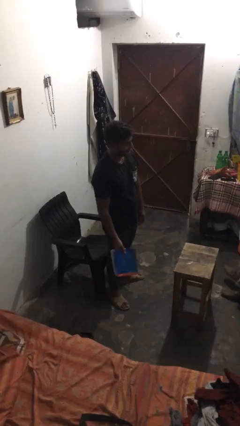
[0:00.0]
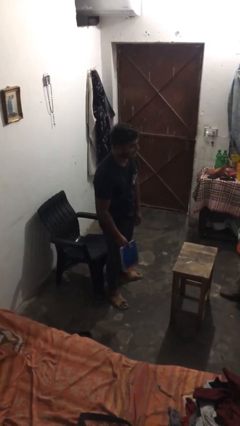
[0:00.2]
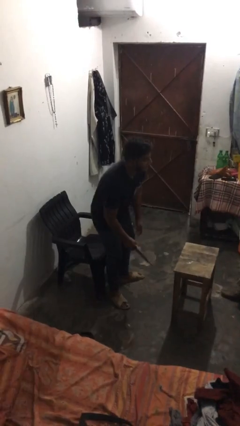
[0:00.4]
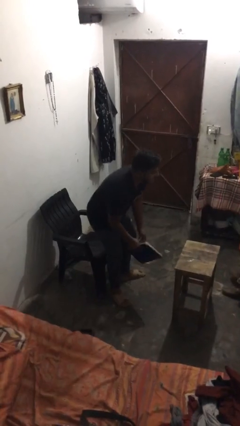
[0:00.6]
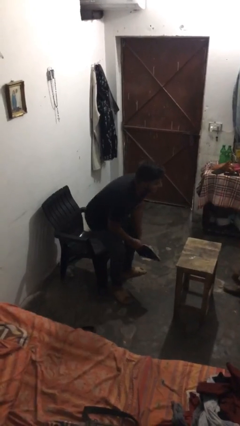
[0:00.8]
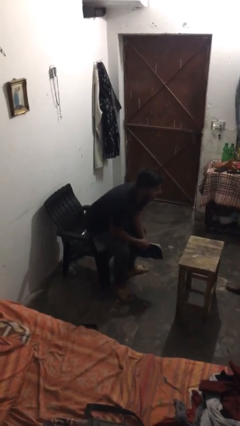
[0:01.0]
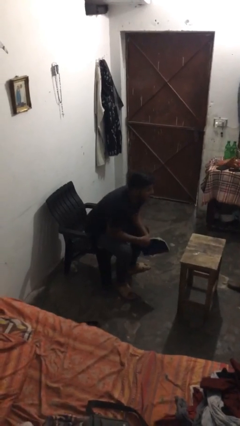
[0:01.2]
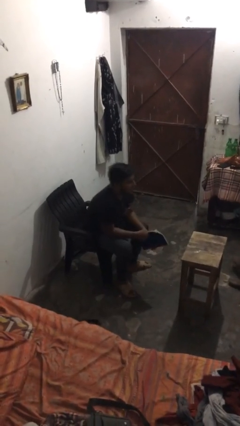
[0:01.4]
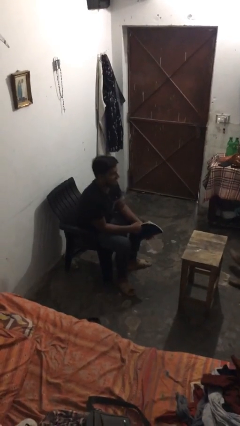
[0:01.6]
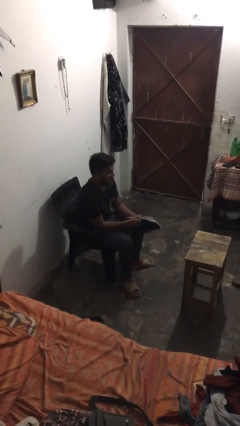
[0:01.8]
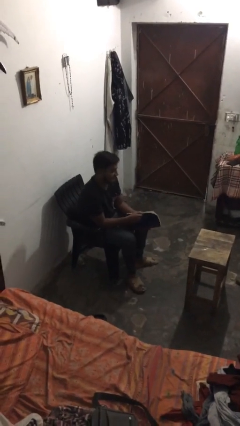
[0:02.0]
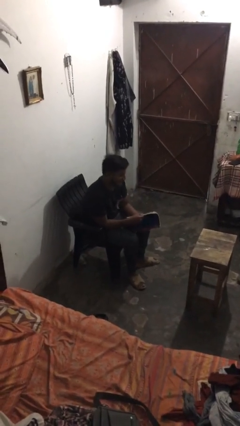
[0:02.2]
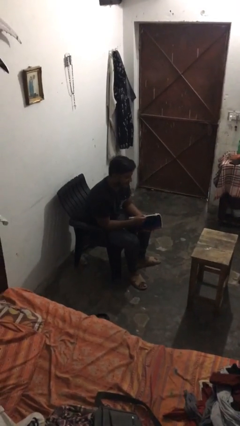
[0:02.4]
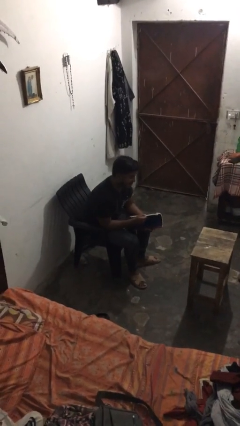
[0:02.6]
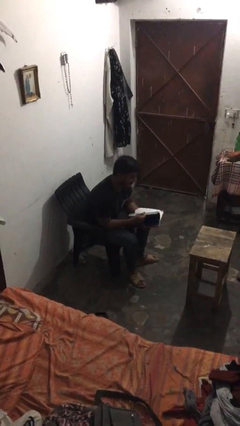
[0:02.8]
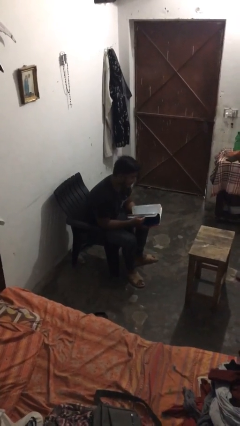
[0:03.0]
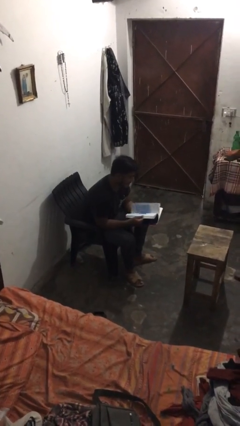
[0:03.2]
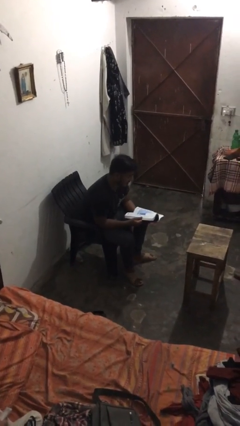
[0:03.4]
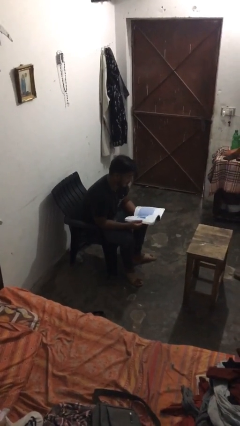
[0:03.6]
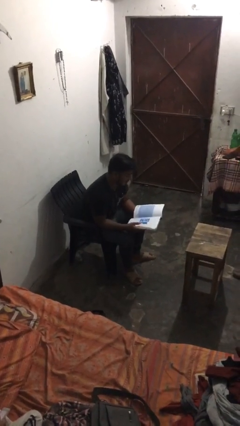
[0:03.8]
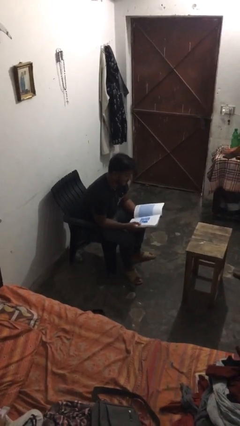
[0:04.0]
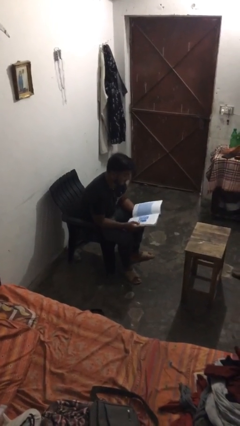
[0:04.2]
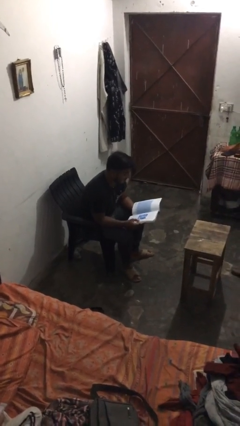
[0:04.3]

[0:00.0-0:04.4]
person sits down

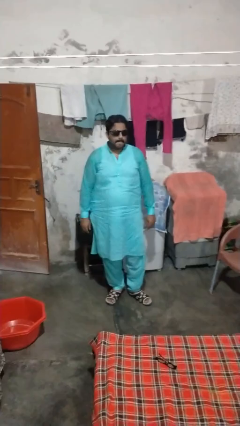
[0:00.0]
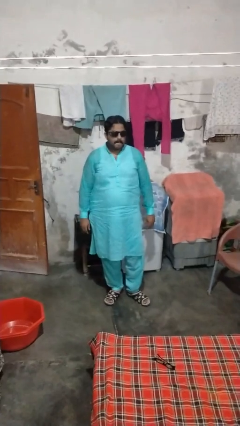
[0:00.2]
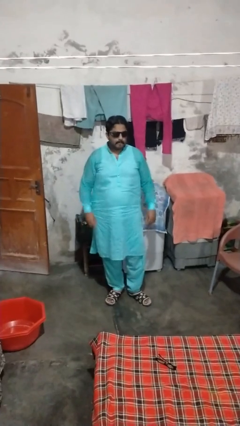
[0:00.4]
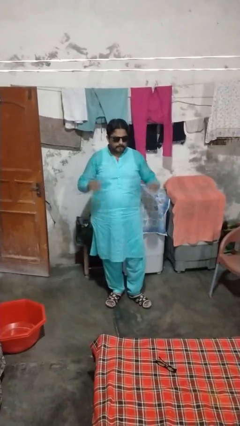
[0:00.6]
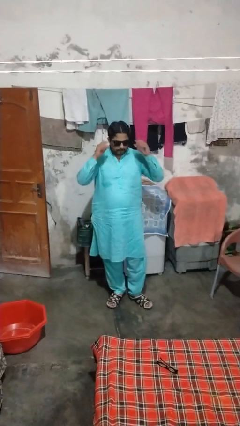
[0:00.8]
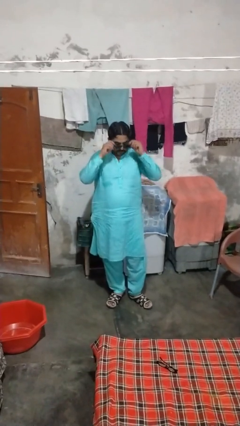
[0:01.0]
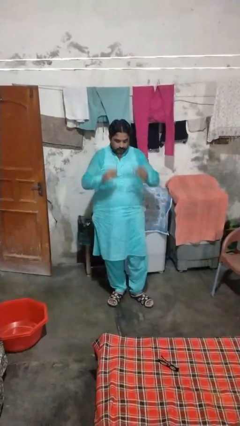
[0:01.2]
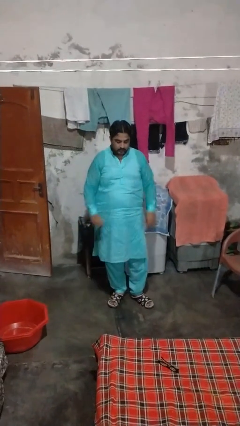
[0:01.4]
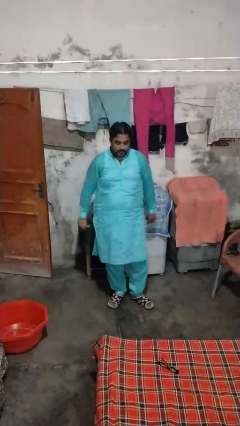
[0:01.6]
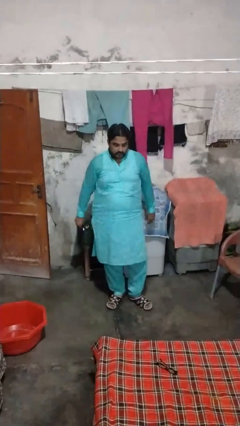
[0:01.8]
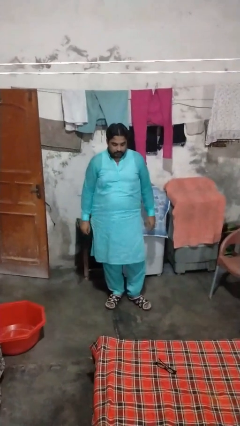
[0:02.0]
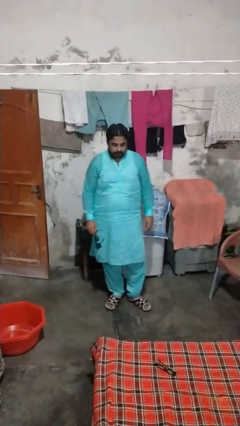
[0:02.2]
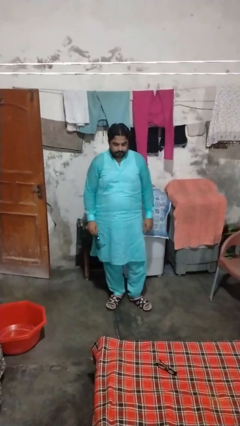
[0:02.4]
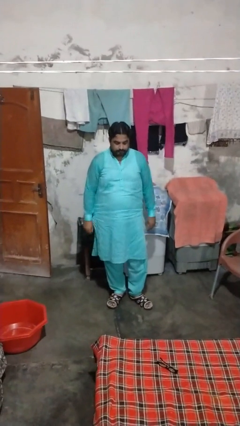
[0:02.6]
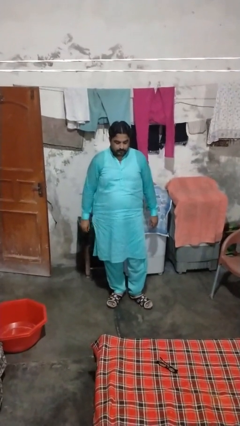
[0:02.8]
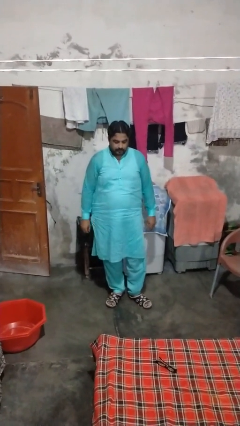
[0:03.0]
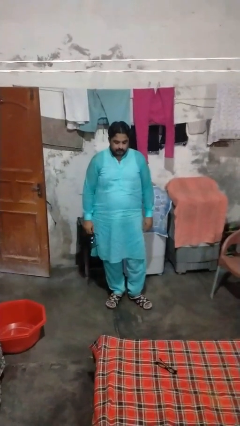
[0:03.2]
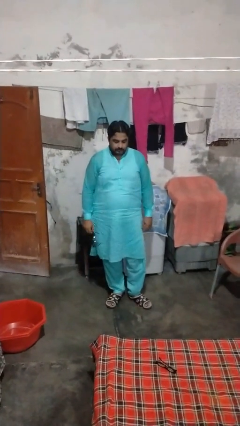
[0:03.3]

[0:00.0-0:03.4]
person takes off sunglasses

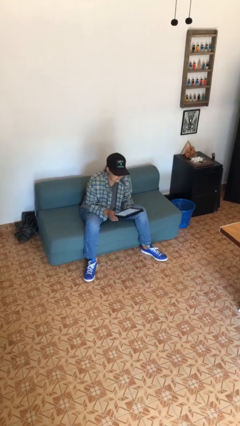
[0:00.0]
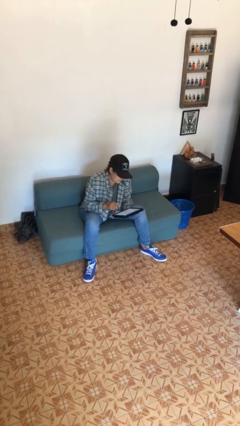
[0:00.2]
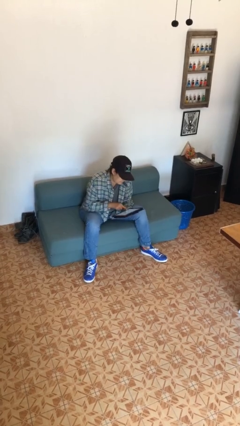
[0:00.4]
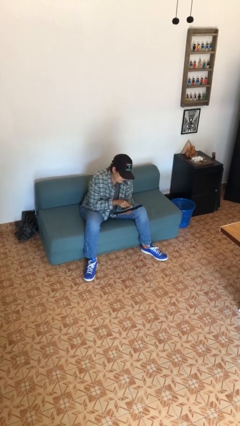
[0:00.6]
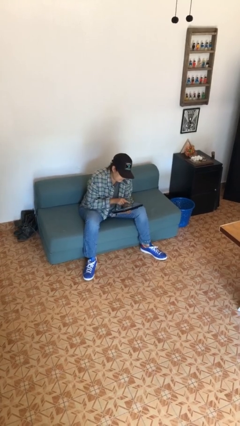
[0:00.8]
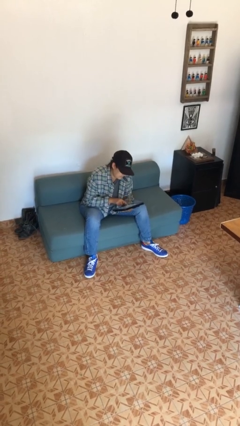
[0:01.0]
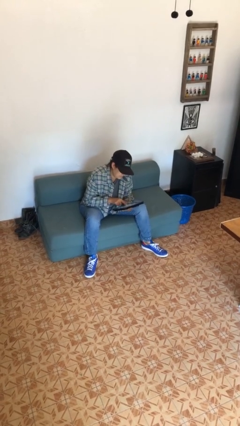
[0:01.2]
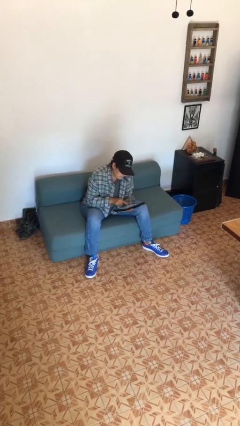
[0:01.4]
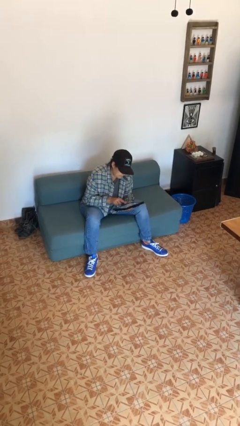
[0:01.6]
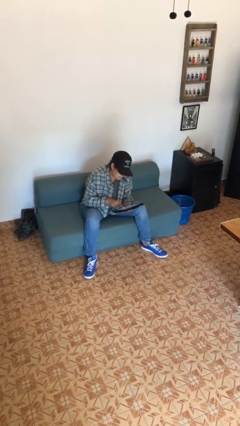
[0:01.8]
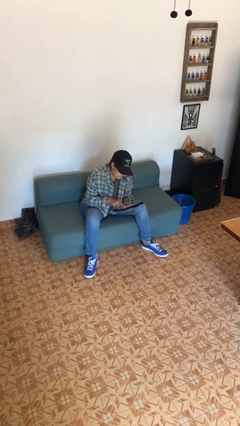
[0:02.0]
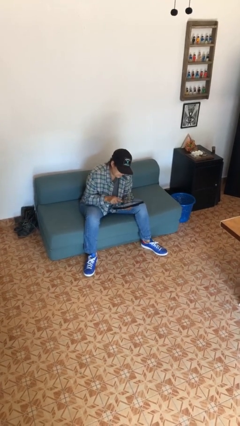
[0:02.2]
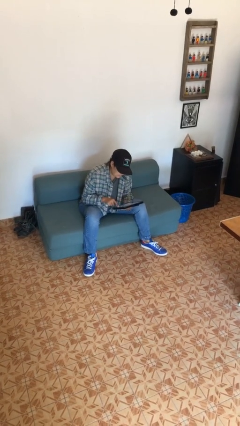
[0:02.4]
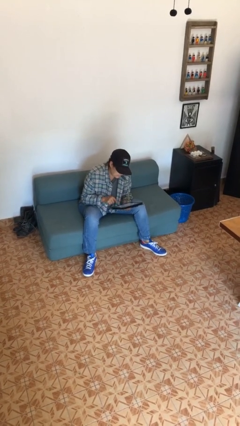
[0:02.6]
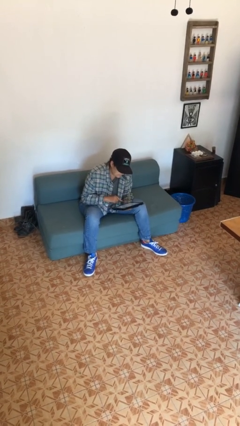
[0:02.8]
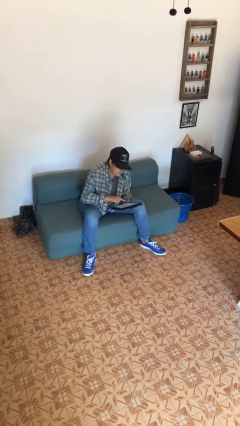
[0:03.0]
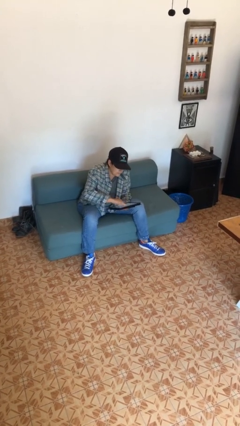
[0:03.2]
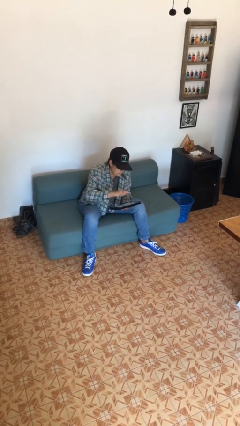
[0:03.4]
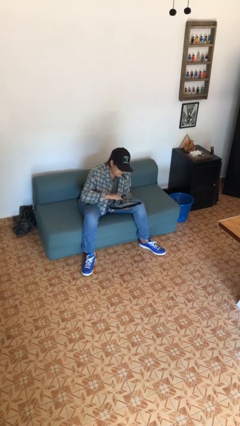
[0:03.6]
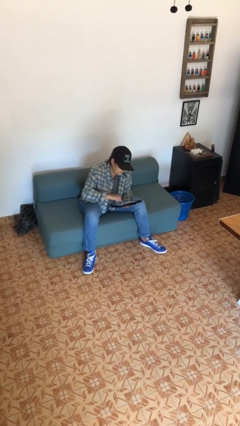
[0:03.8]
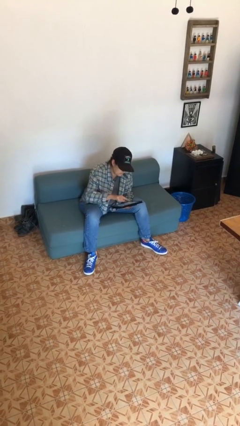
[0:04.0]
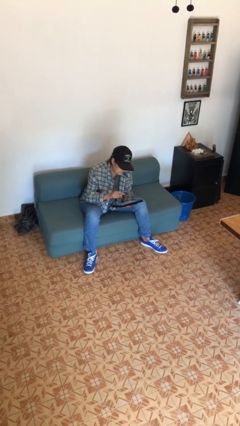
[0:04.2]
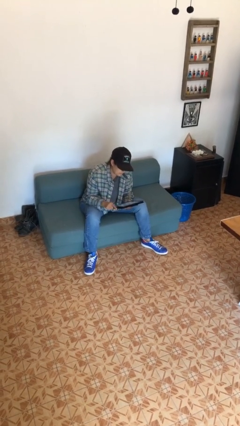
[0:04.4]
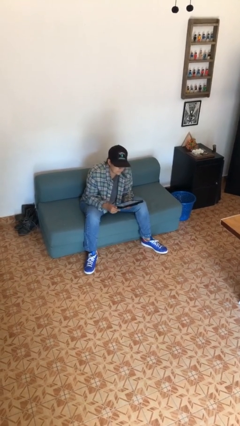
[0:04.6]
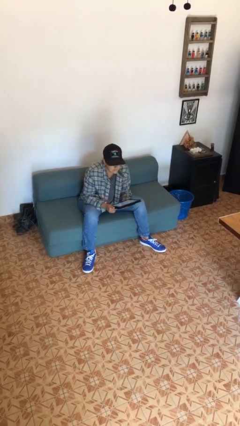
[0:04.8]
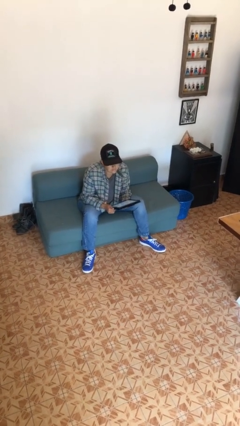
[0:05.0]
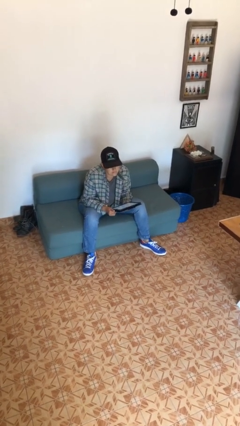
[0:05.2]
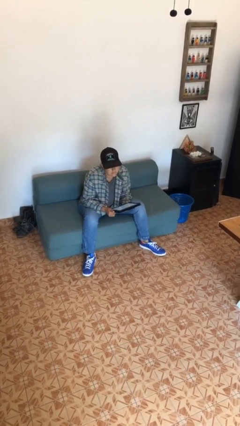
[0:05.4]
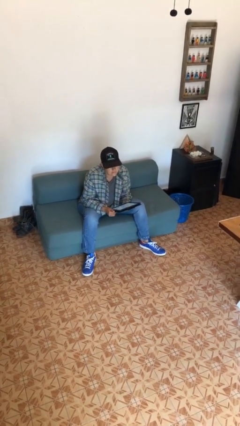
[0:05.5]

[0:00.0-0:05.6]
person interacts with tablet

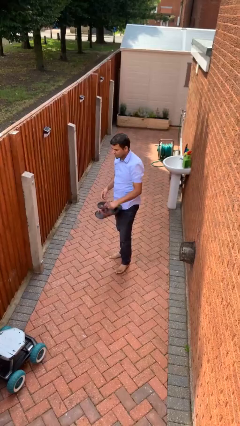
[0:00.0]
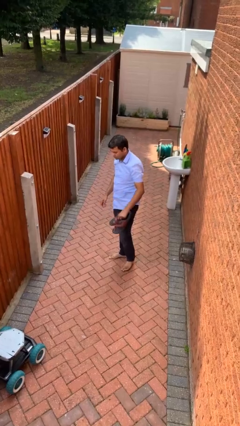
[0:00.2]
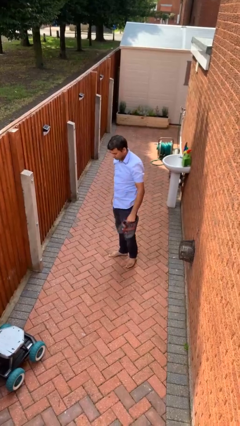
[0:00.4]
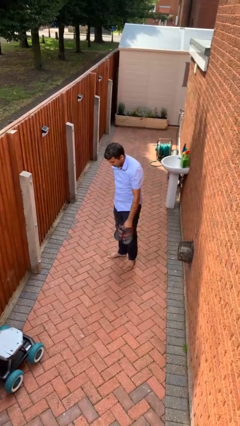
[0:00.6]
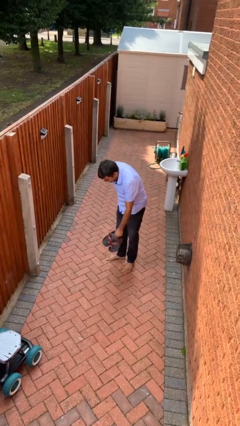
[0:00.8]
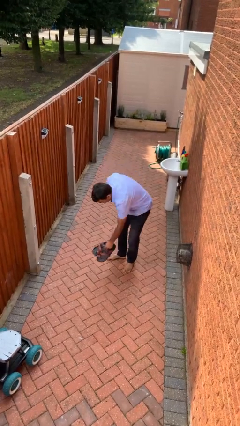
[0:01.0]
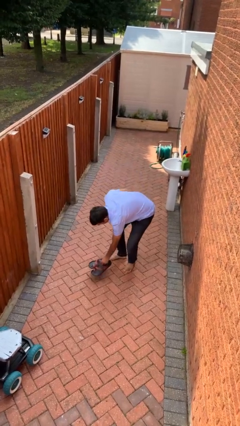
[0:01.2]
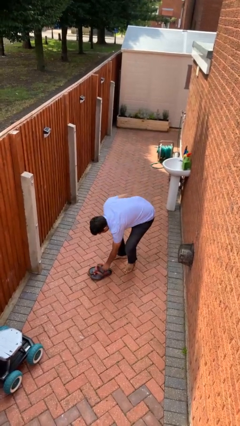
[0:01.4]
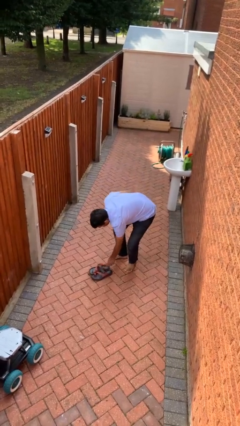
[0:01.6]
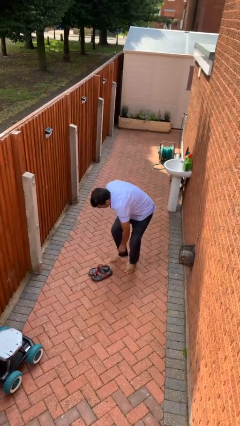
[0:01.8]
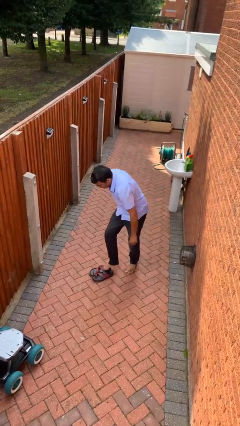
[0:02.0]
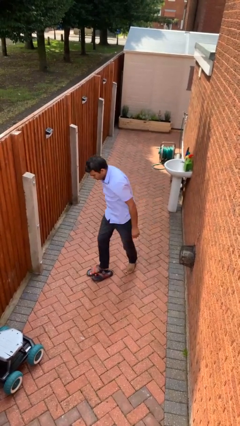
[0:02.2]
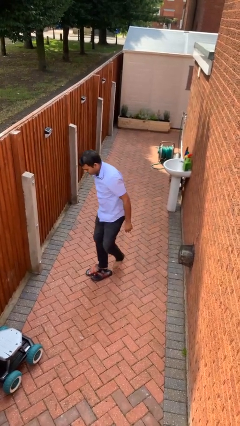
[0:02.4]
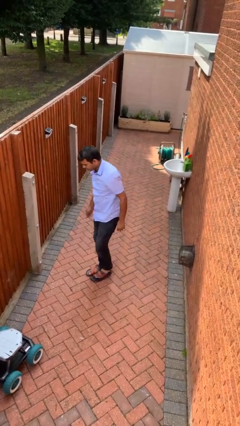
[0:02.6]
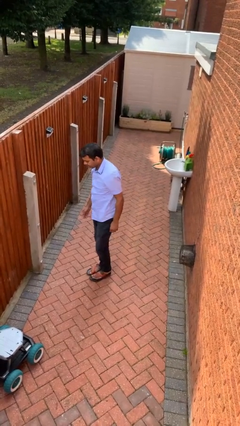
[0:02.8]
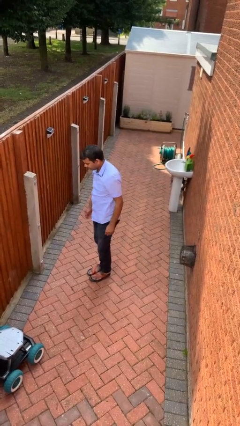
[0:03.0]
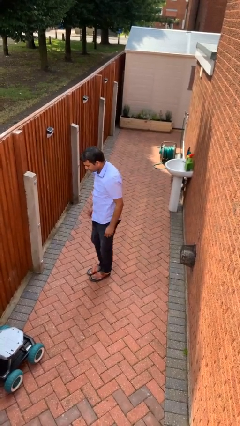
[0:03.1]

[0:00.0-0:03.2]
person puts on shoes

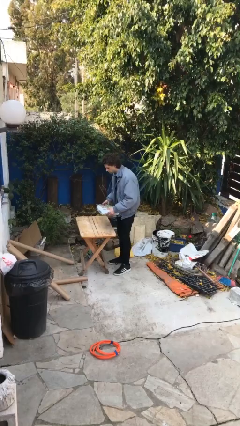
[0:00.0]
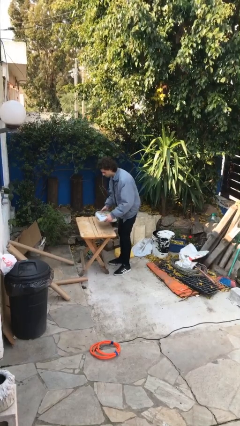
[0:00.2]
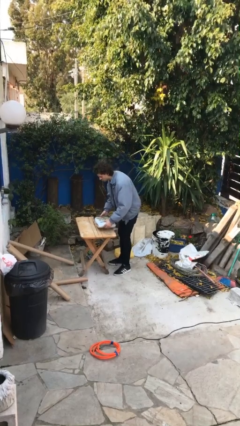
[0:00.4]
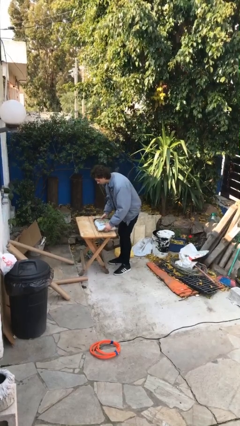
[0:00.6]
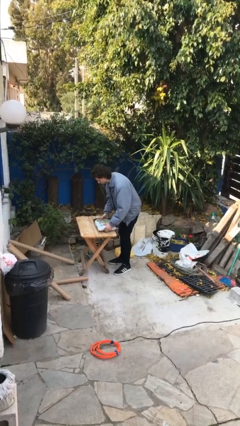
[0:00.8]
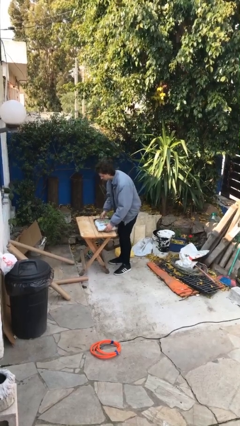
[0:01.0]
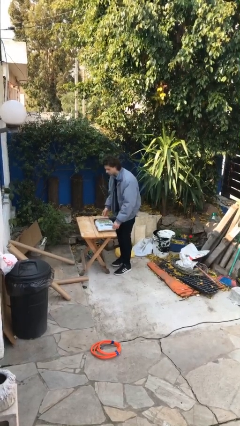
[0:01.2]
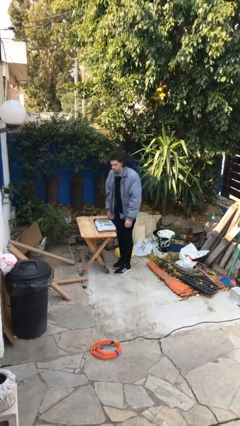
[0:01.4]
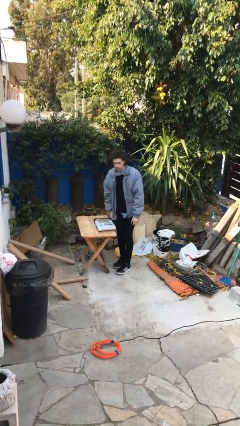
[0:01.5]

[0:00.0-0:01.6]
person puts down object on table
